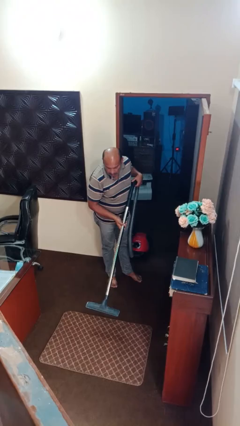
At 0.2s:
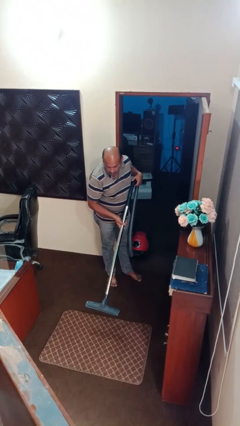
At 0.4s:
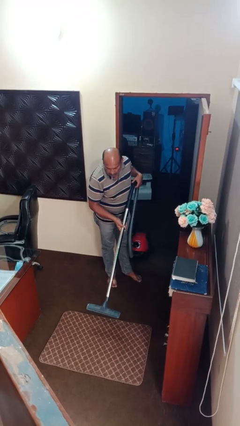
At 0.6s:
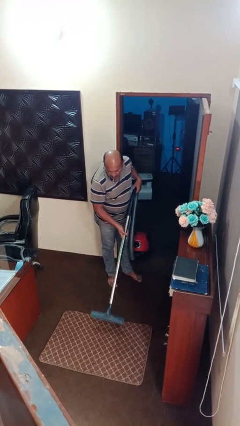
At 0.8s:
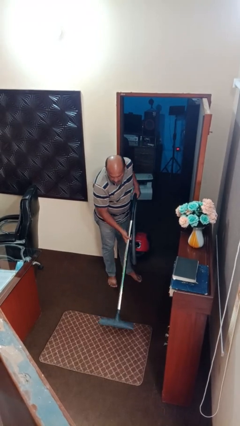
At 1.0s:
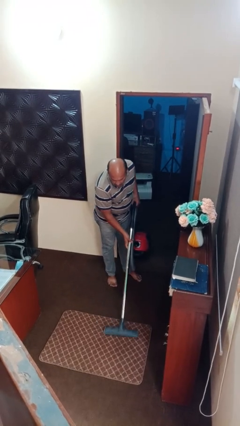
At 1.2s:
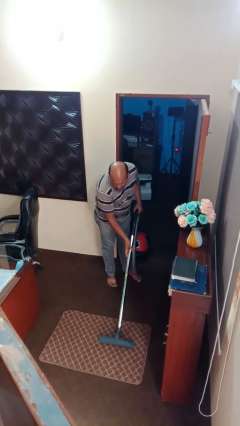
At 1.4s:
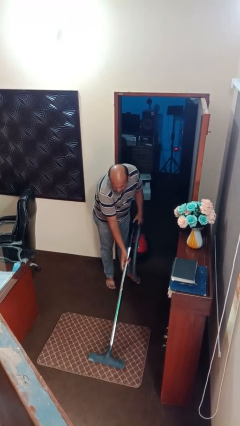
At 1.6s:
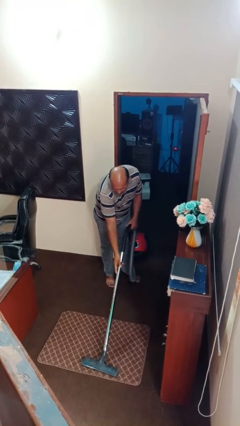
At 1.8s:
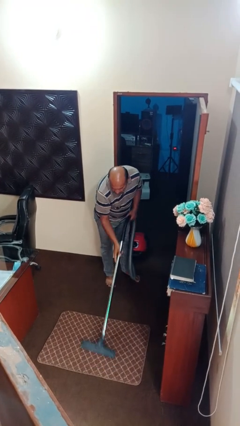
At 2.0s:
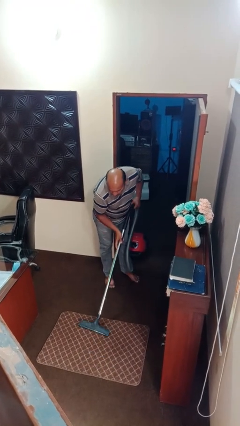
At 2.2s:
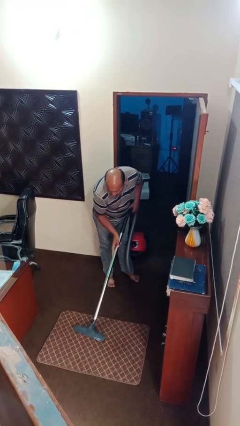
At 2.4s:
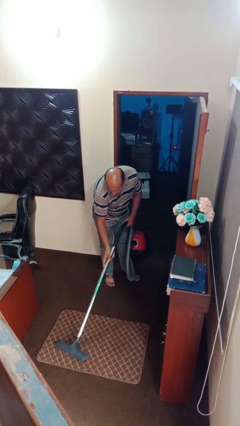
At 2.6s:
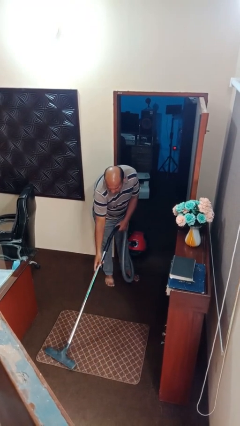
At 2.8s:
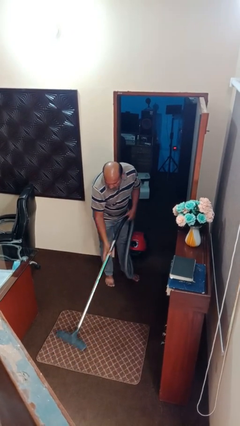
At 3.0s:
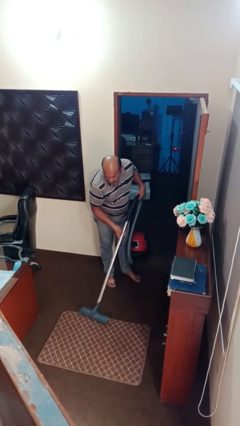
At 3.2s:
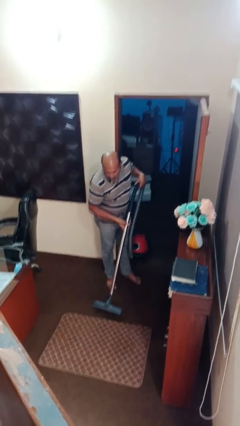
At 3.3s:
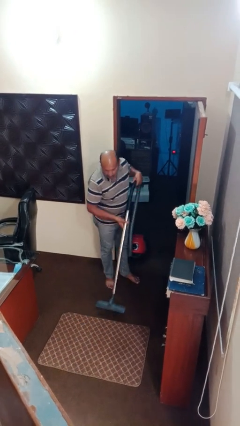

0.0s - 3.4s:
person vacuums carpet

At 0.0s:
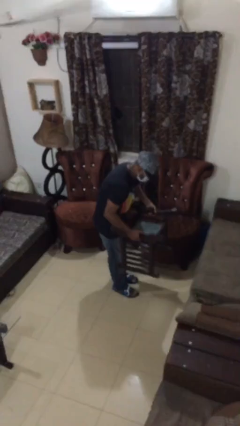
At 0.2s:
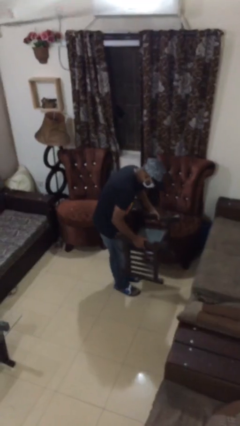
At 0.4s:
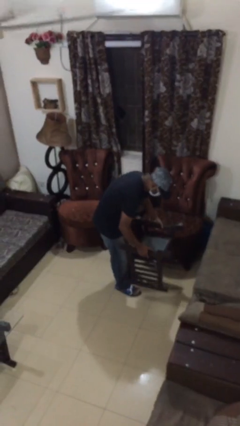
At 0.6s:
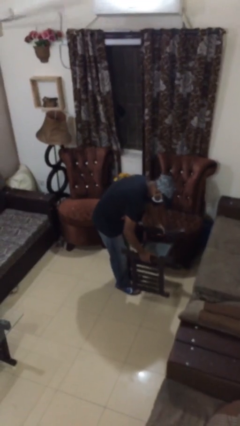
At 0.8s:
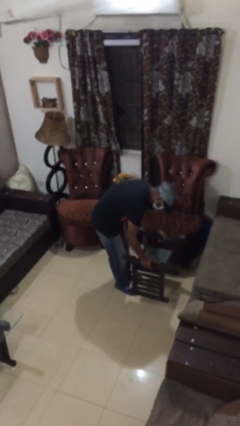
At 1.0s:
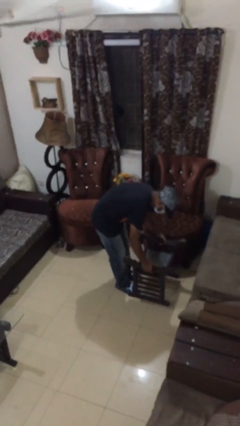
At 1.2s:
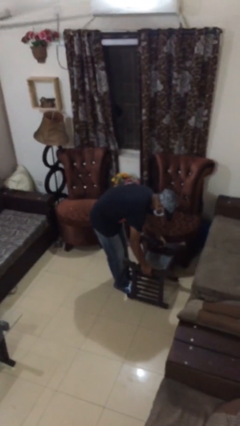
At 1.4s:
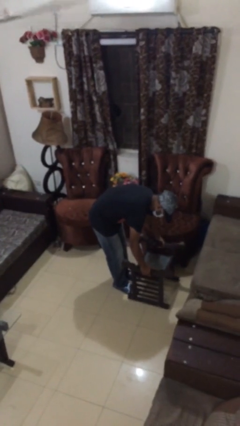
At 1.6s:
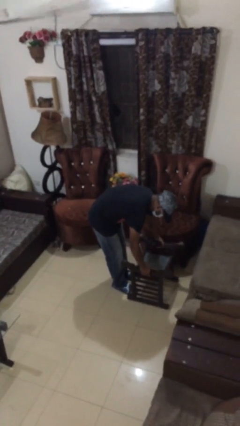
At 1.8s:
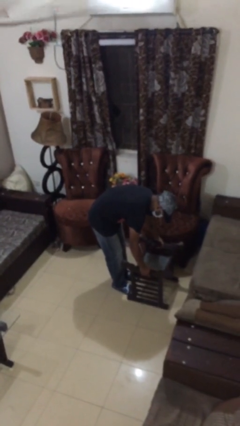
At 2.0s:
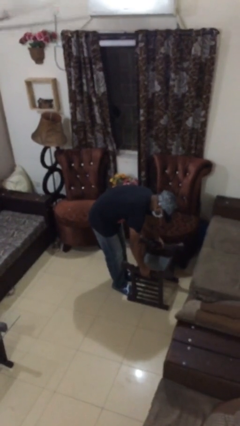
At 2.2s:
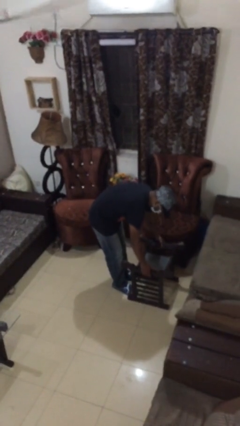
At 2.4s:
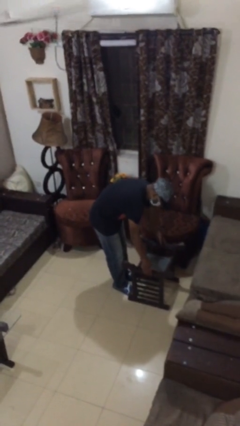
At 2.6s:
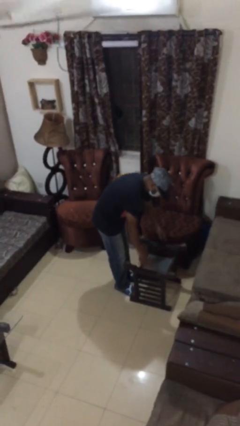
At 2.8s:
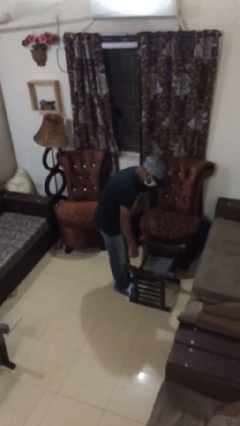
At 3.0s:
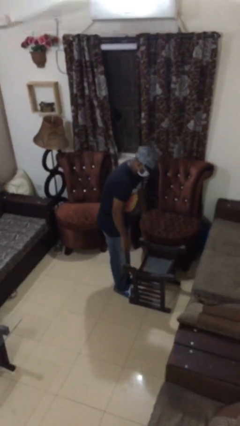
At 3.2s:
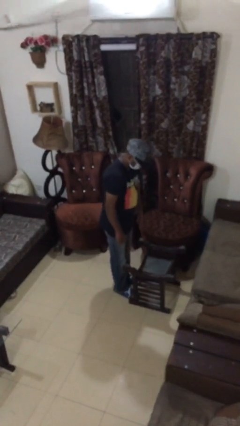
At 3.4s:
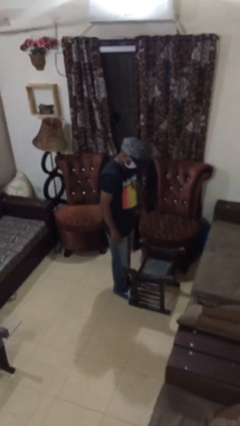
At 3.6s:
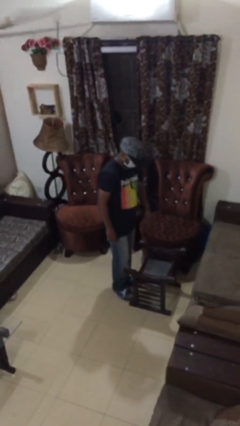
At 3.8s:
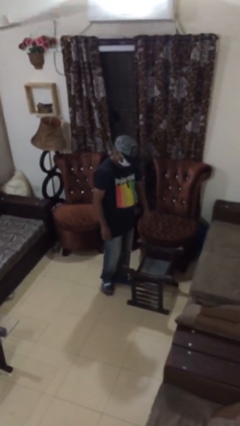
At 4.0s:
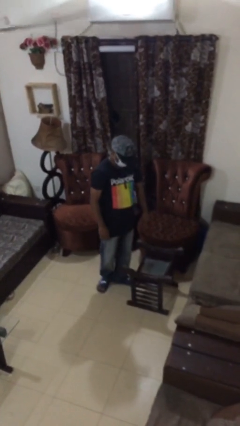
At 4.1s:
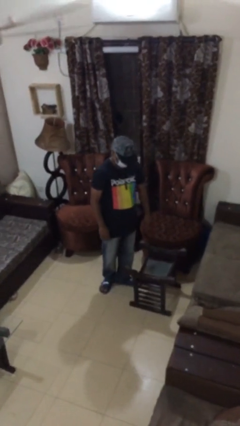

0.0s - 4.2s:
person puts down object on floor

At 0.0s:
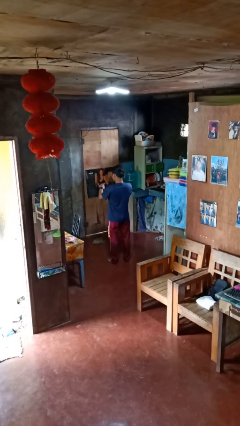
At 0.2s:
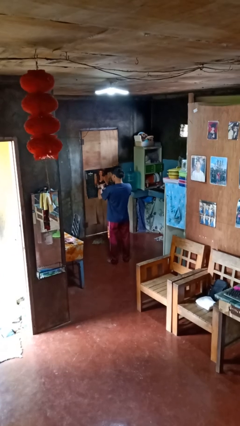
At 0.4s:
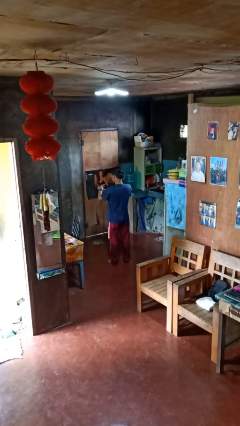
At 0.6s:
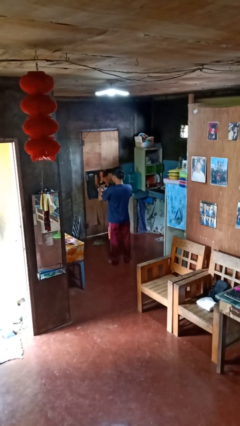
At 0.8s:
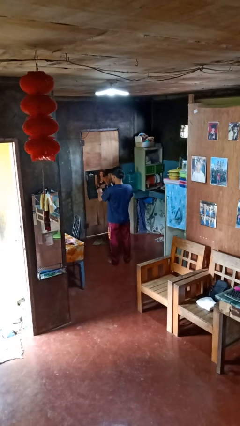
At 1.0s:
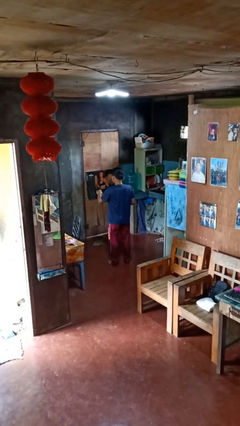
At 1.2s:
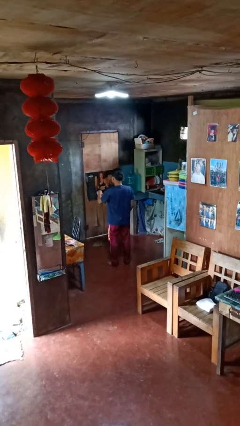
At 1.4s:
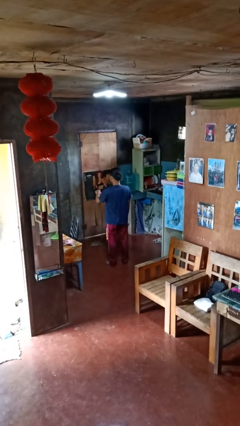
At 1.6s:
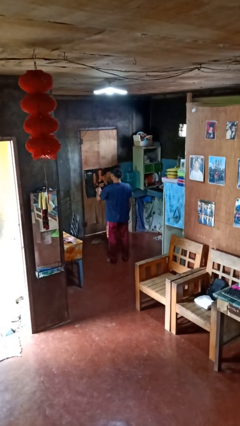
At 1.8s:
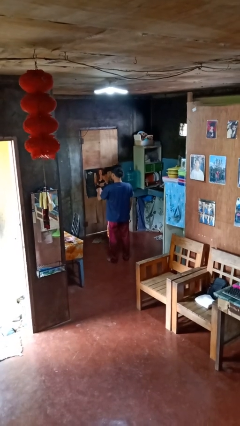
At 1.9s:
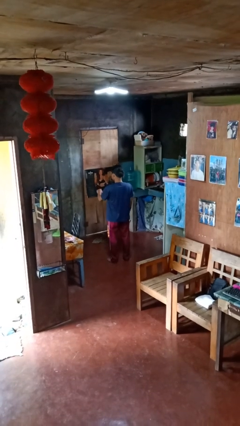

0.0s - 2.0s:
person takes off wristwatch

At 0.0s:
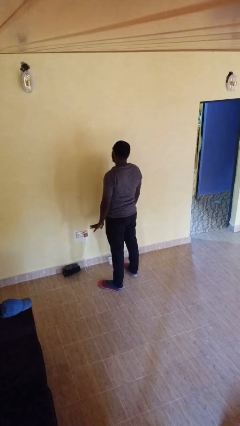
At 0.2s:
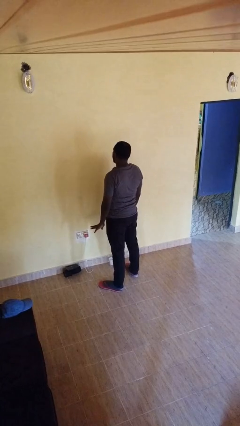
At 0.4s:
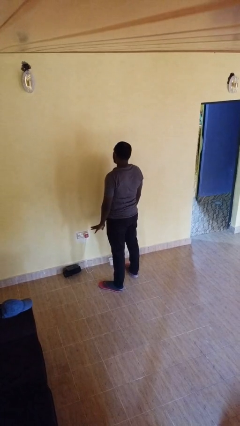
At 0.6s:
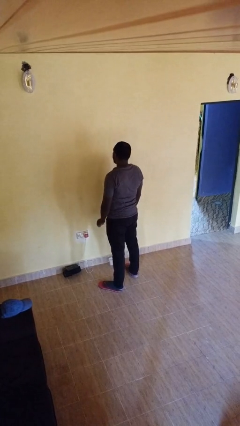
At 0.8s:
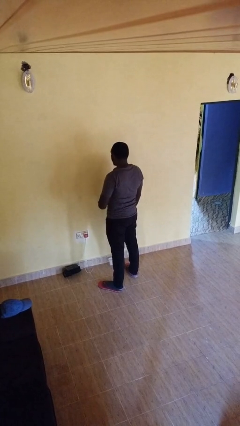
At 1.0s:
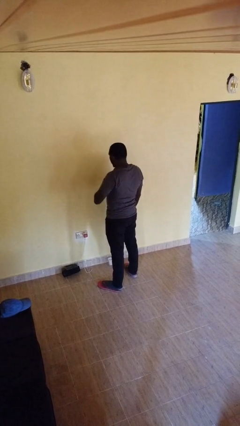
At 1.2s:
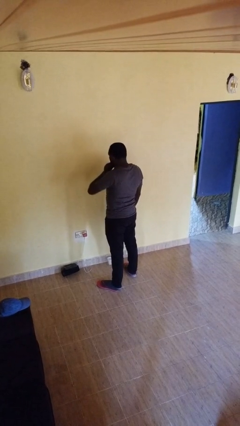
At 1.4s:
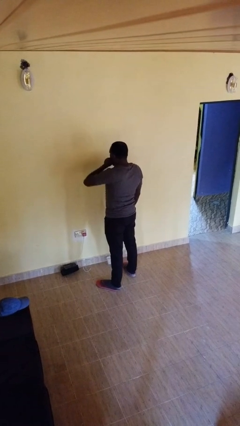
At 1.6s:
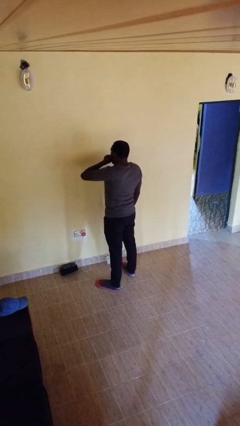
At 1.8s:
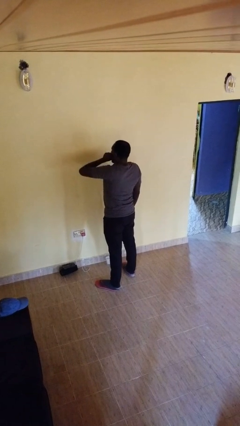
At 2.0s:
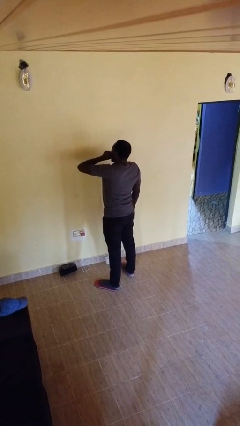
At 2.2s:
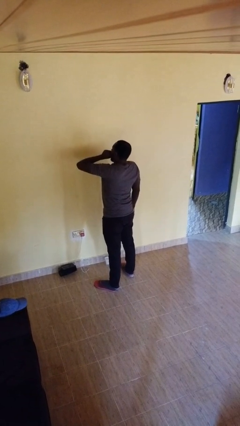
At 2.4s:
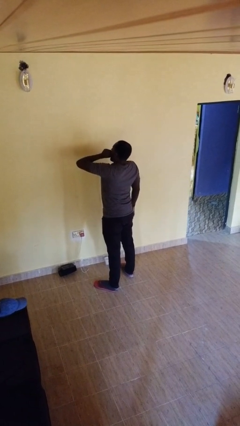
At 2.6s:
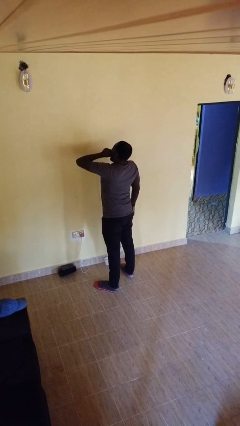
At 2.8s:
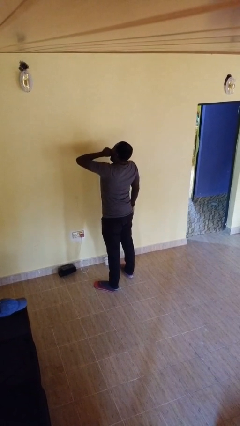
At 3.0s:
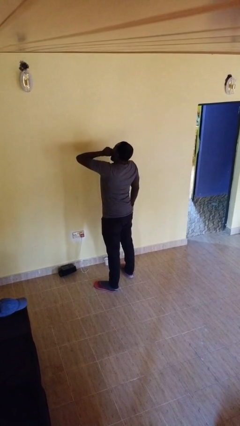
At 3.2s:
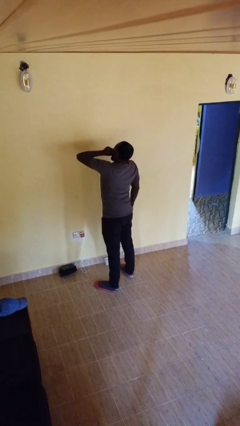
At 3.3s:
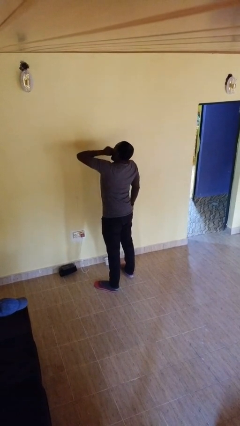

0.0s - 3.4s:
person yawns

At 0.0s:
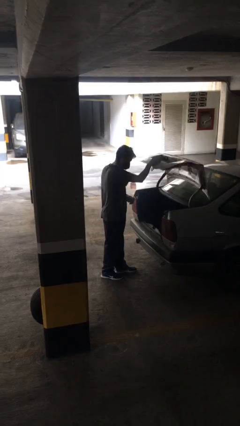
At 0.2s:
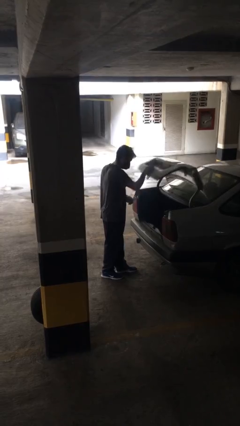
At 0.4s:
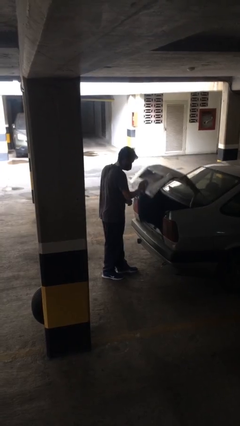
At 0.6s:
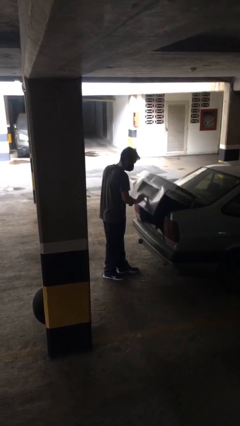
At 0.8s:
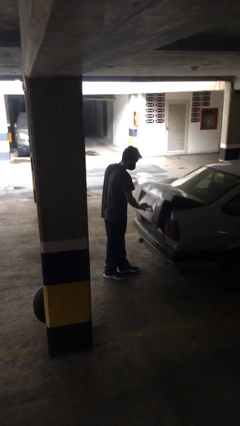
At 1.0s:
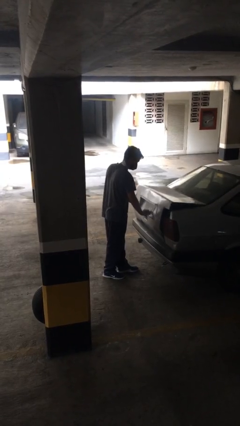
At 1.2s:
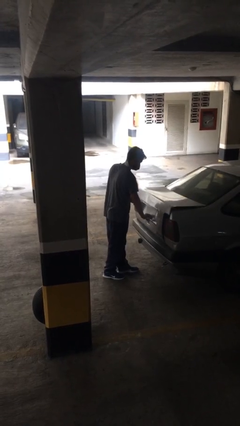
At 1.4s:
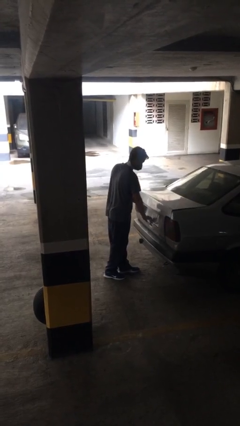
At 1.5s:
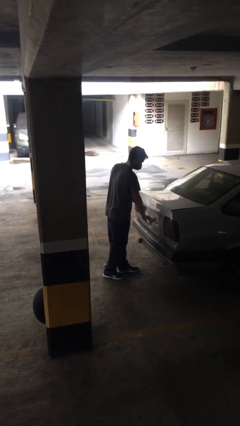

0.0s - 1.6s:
person closes car trunk

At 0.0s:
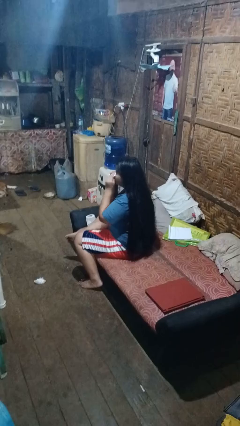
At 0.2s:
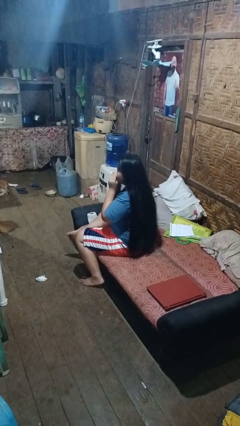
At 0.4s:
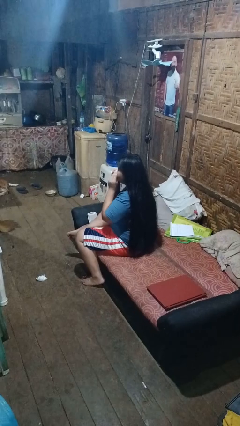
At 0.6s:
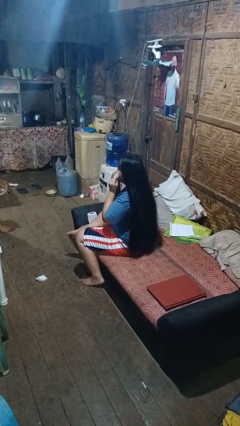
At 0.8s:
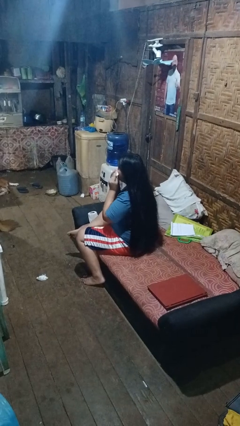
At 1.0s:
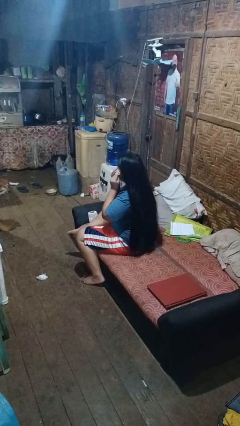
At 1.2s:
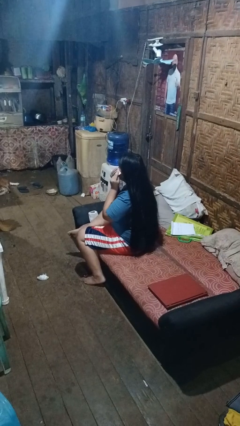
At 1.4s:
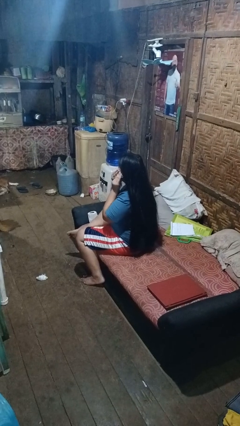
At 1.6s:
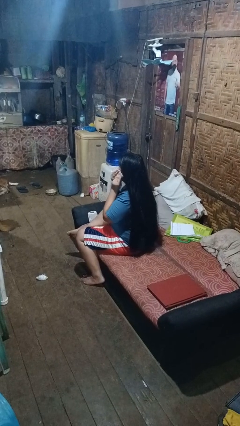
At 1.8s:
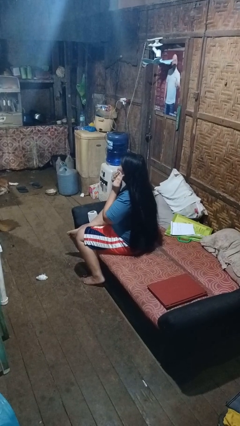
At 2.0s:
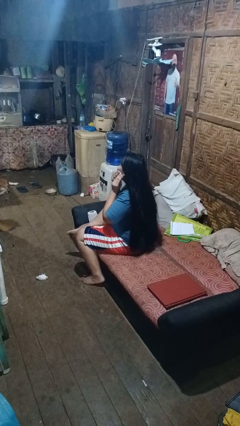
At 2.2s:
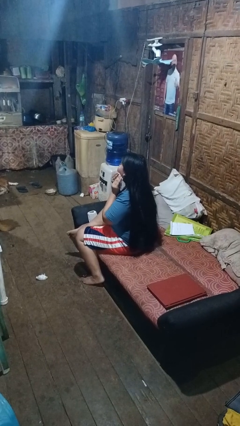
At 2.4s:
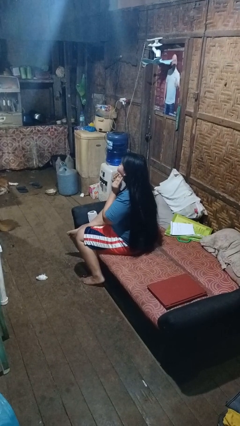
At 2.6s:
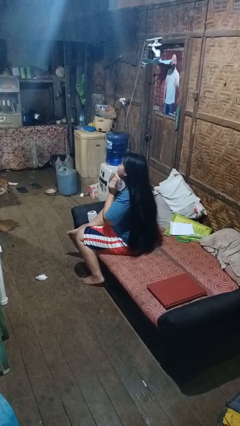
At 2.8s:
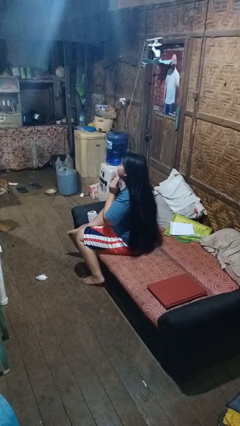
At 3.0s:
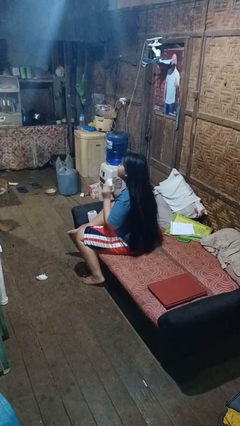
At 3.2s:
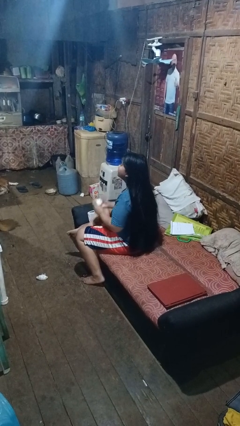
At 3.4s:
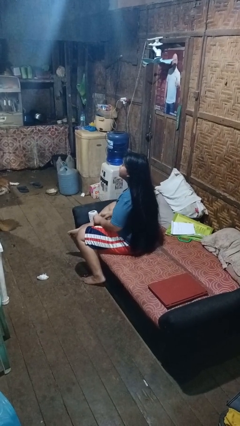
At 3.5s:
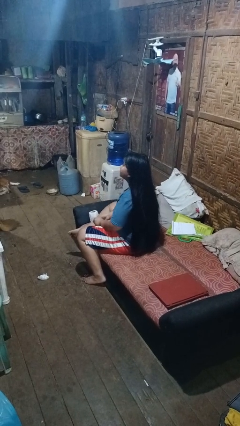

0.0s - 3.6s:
person wipes mouth with napkin
